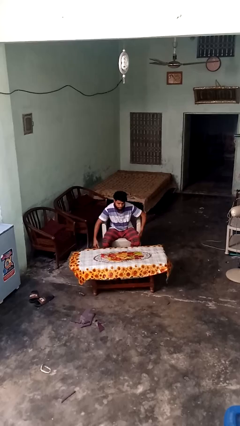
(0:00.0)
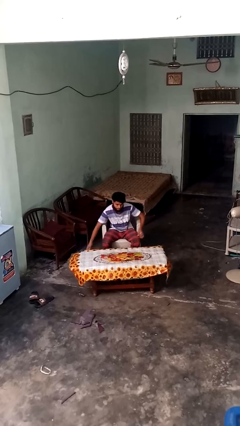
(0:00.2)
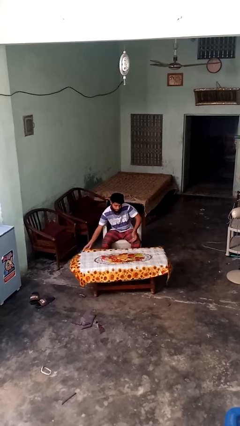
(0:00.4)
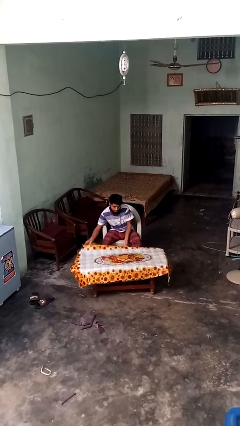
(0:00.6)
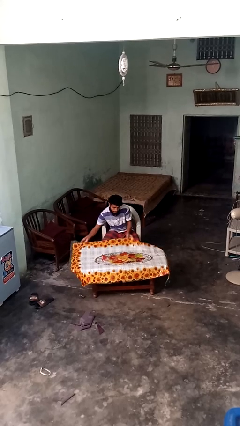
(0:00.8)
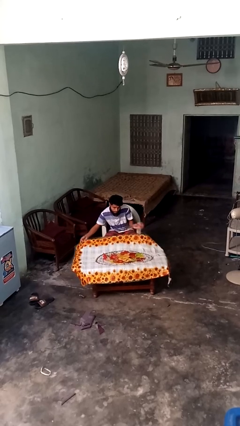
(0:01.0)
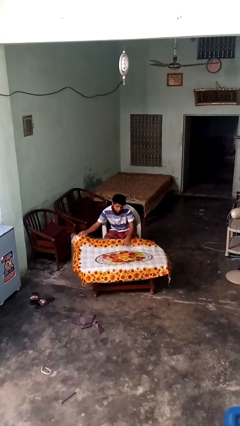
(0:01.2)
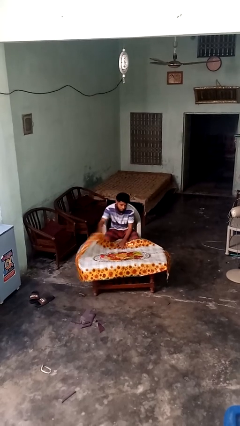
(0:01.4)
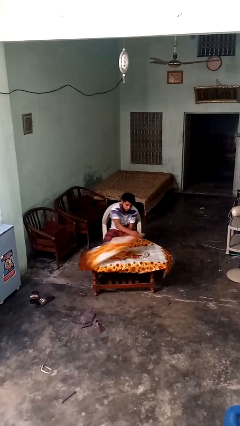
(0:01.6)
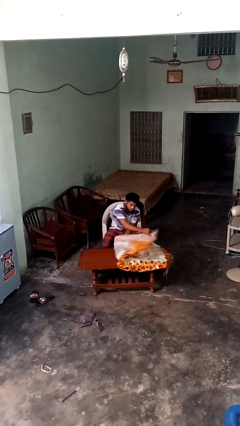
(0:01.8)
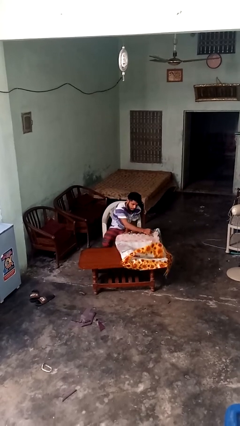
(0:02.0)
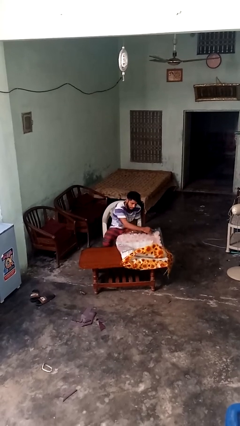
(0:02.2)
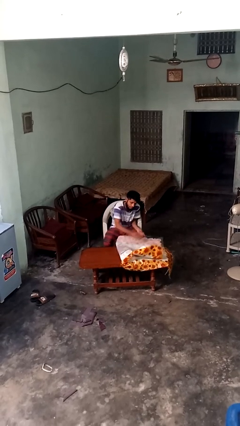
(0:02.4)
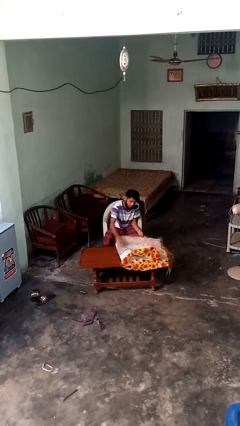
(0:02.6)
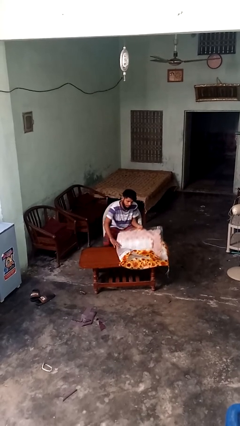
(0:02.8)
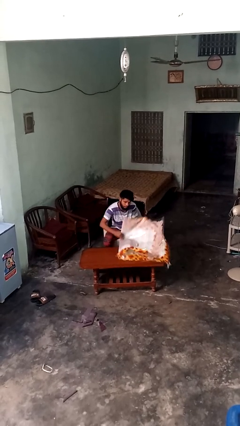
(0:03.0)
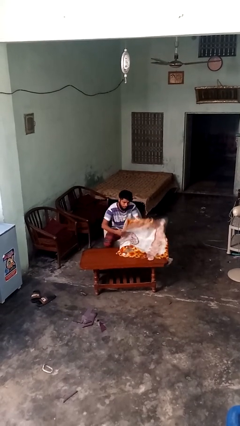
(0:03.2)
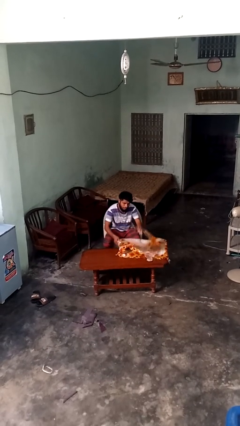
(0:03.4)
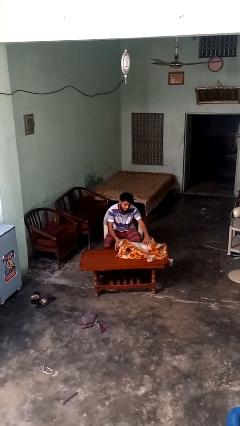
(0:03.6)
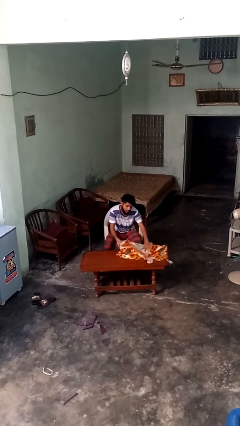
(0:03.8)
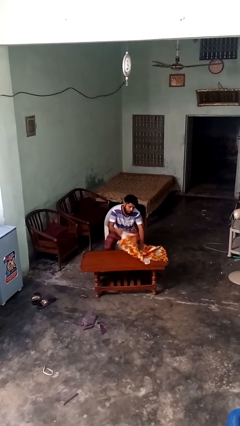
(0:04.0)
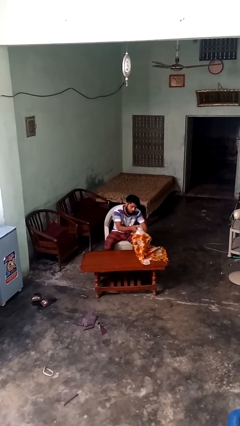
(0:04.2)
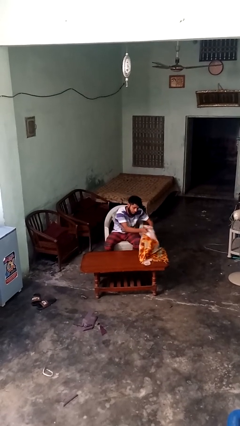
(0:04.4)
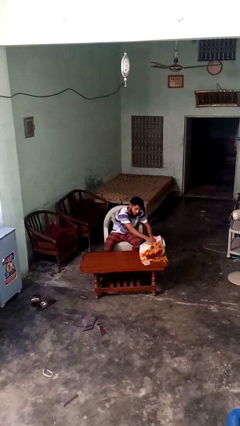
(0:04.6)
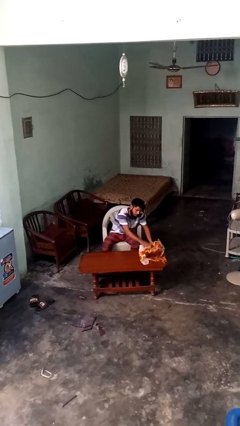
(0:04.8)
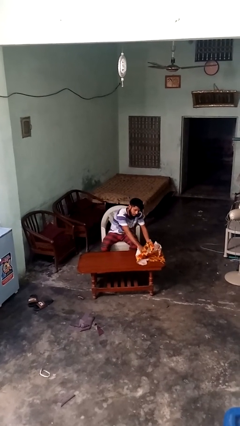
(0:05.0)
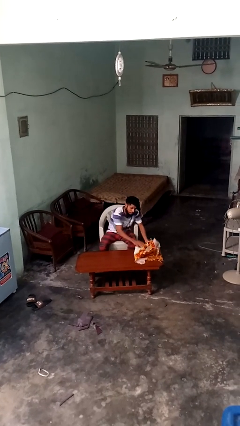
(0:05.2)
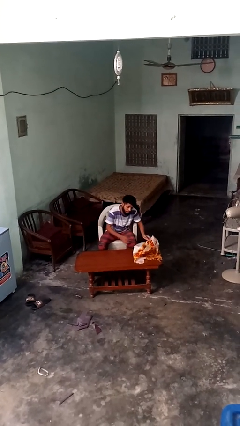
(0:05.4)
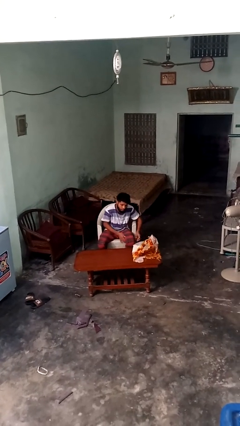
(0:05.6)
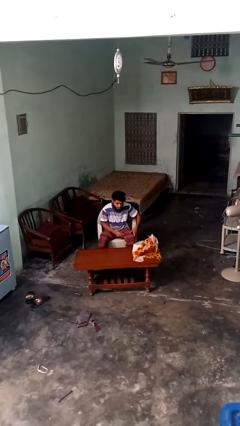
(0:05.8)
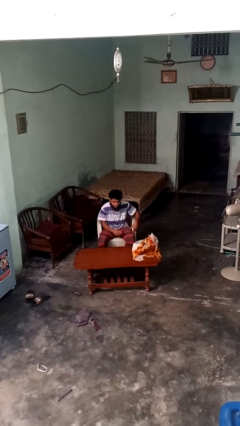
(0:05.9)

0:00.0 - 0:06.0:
person folds tablecloth

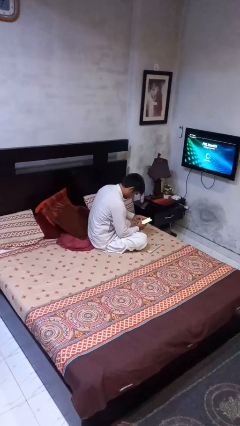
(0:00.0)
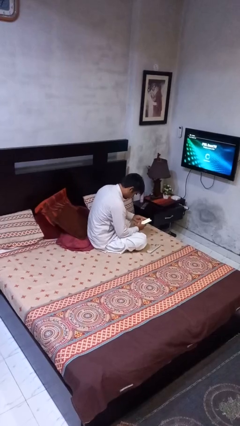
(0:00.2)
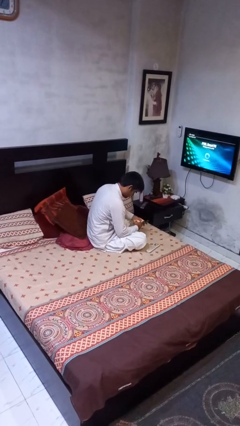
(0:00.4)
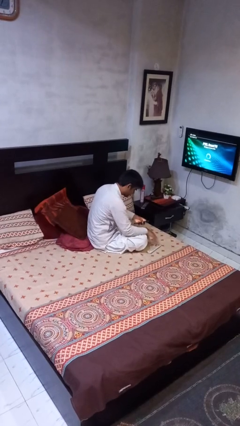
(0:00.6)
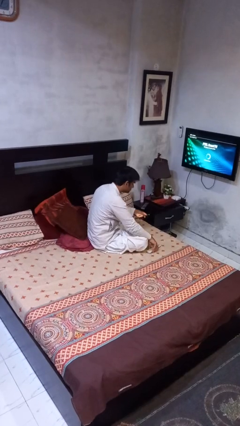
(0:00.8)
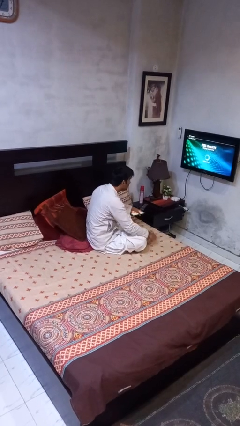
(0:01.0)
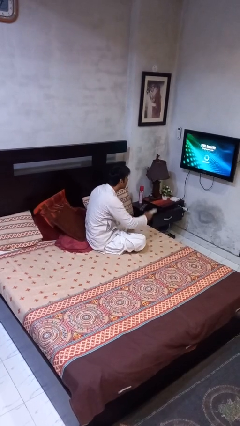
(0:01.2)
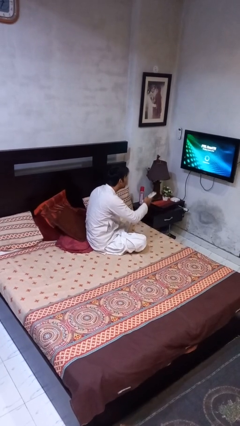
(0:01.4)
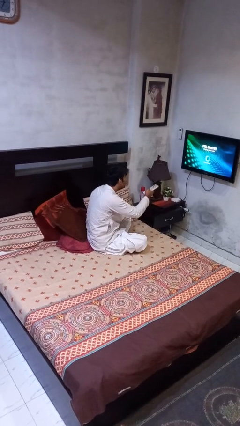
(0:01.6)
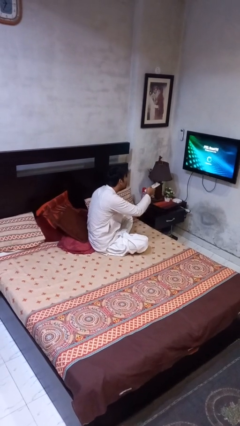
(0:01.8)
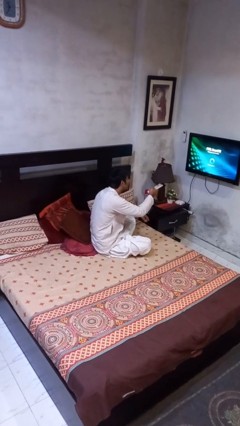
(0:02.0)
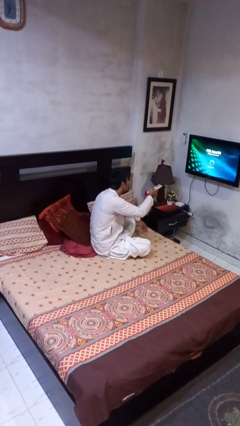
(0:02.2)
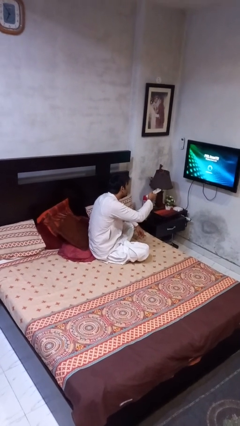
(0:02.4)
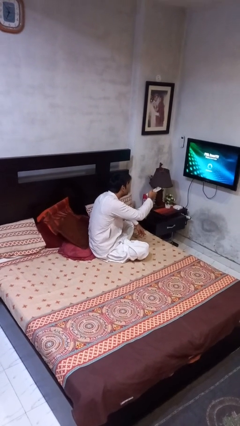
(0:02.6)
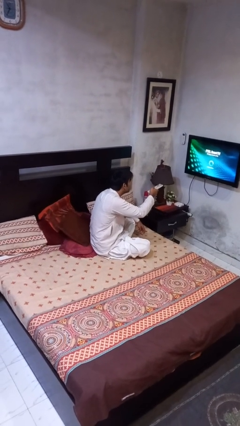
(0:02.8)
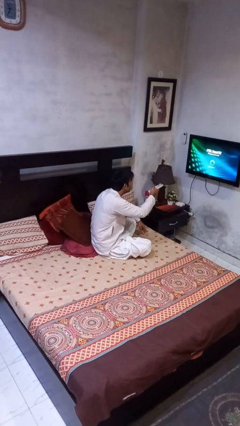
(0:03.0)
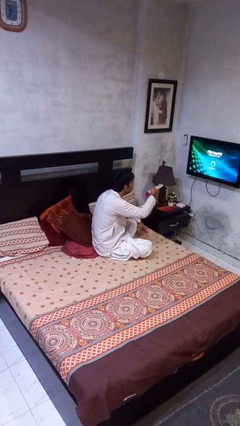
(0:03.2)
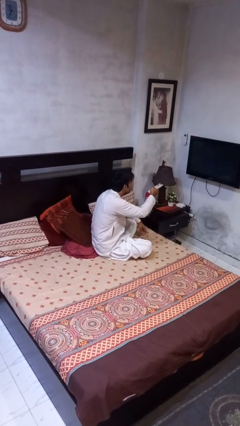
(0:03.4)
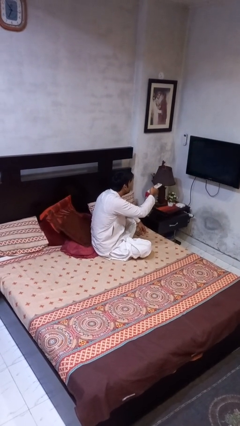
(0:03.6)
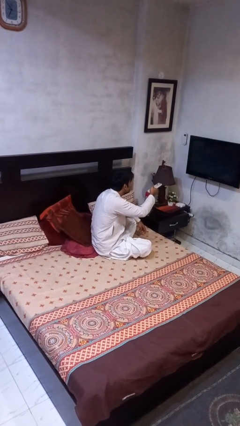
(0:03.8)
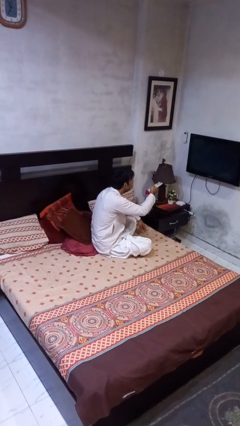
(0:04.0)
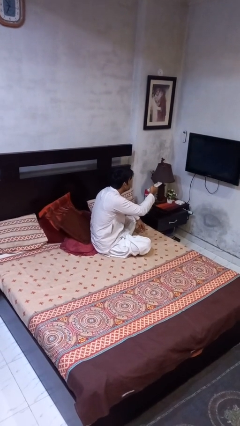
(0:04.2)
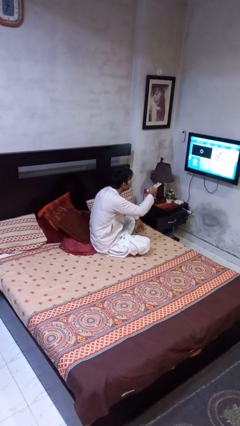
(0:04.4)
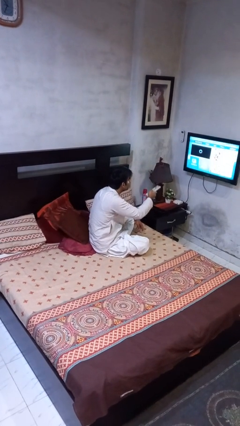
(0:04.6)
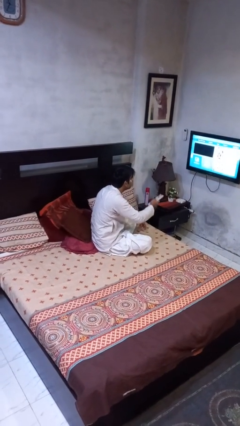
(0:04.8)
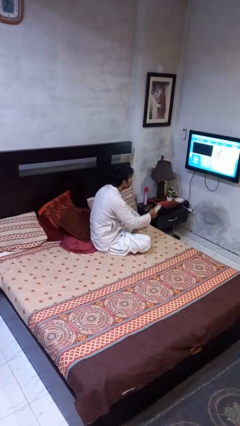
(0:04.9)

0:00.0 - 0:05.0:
person uses television remote

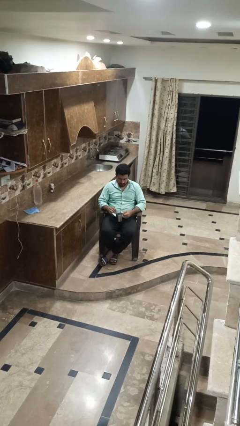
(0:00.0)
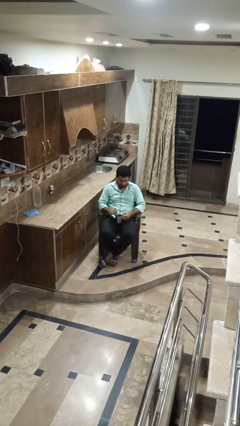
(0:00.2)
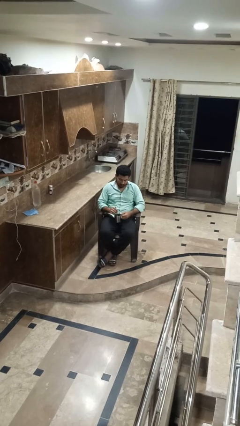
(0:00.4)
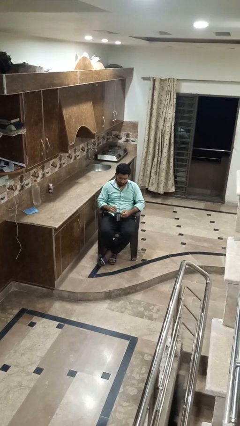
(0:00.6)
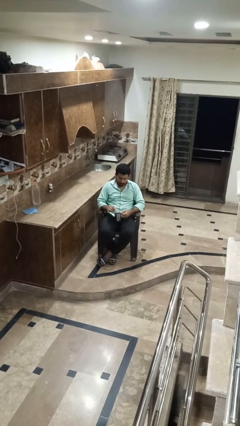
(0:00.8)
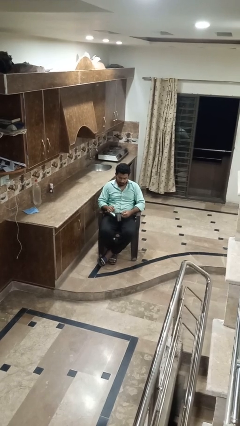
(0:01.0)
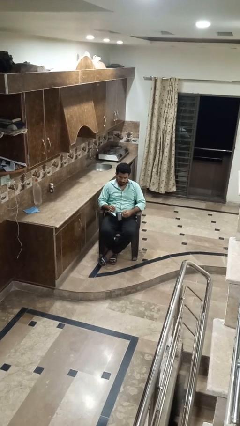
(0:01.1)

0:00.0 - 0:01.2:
person stirs mug

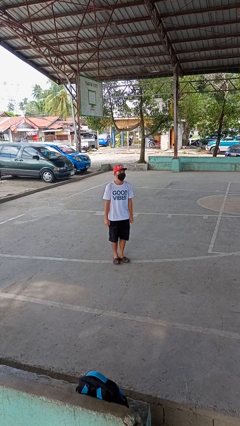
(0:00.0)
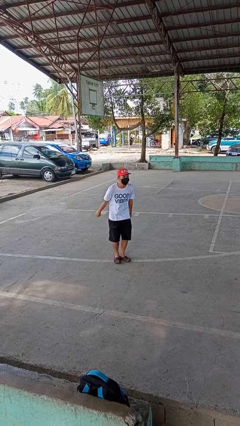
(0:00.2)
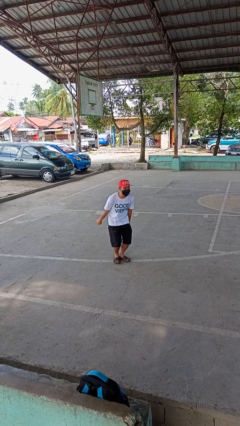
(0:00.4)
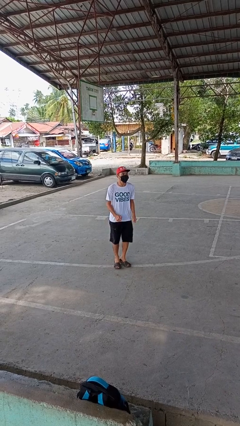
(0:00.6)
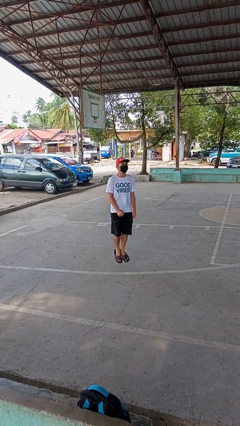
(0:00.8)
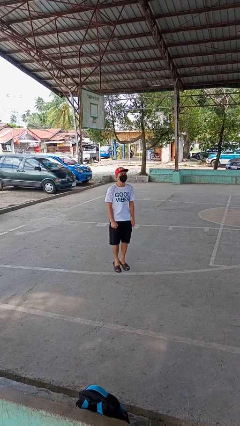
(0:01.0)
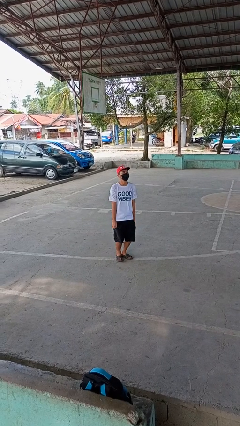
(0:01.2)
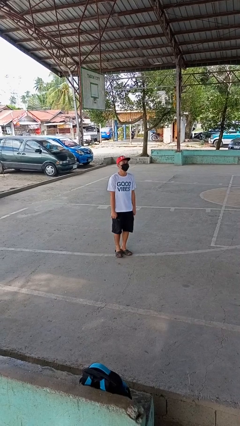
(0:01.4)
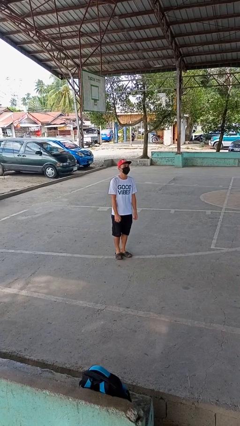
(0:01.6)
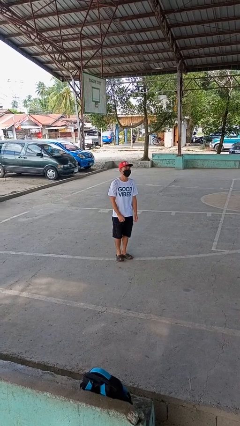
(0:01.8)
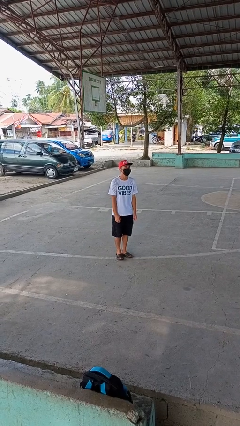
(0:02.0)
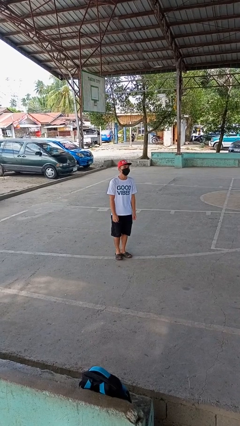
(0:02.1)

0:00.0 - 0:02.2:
person jumps

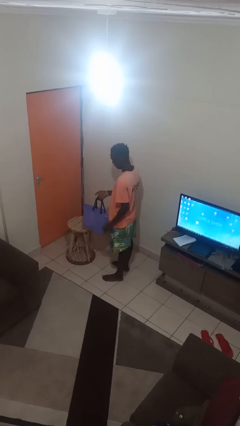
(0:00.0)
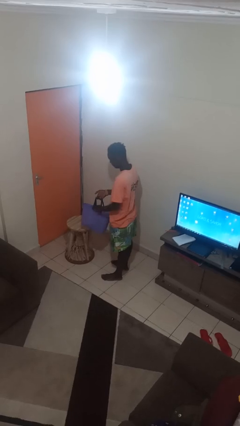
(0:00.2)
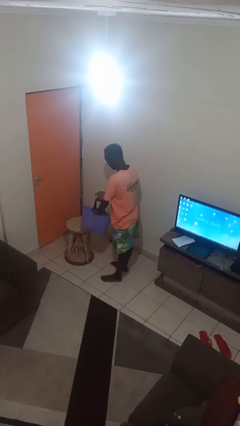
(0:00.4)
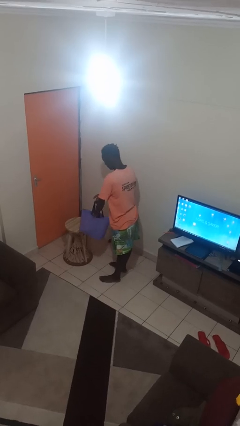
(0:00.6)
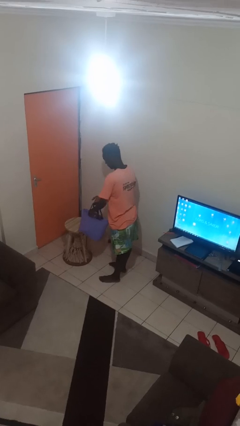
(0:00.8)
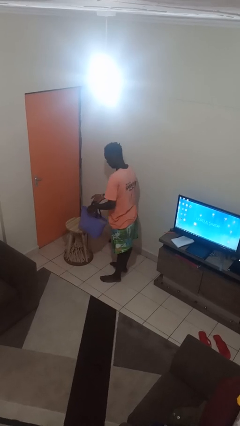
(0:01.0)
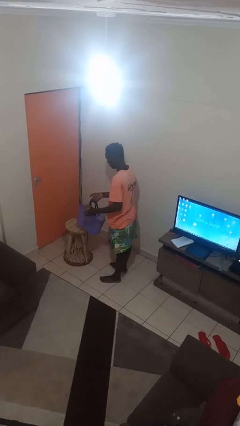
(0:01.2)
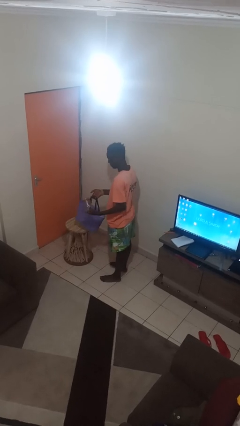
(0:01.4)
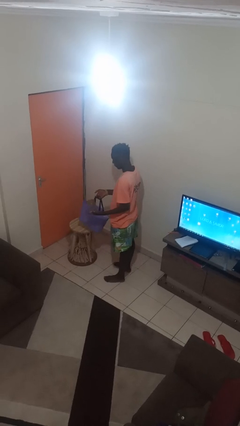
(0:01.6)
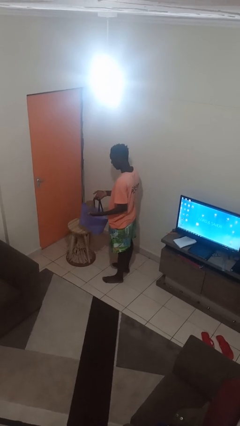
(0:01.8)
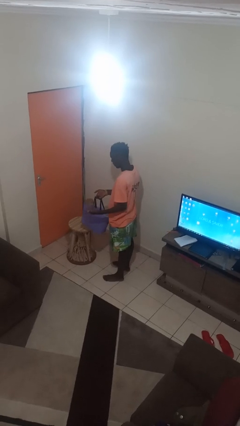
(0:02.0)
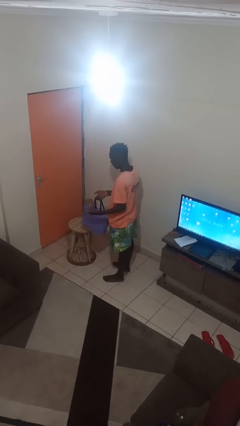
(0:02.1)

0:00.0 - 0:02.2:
person takes object from bag

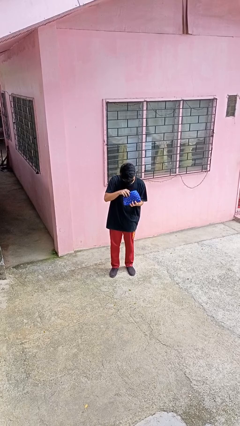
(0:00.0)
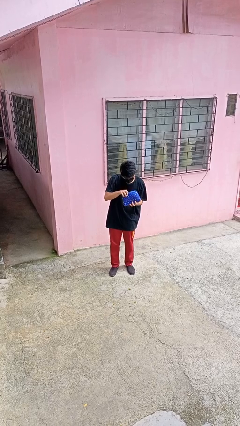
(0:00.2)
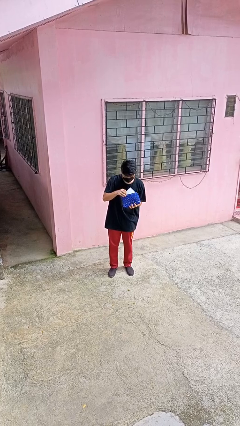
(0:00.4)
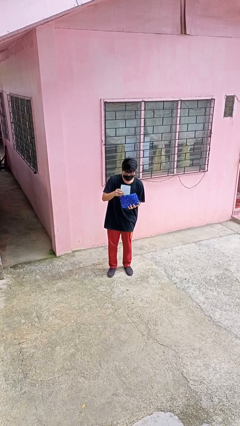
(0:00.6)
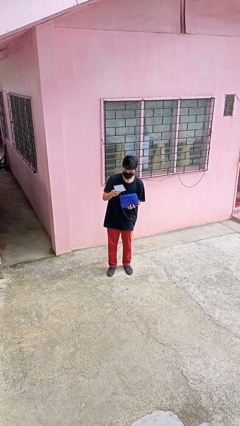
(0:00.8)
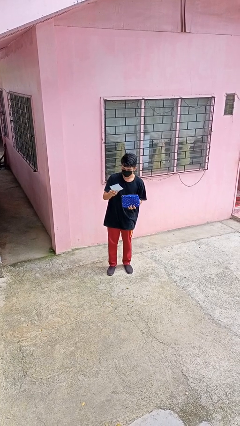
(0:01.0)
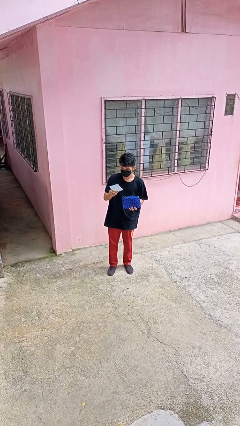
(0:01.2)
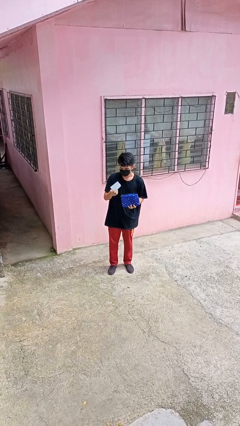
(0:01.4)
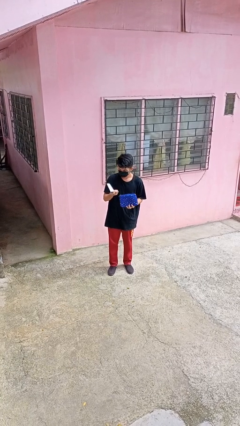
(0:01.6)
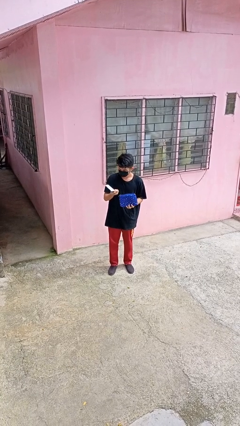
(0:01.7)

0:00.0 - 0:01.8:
person takes object from purse
